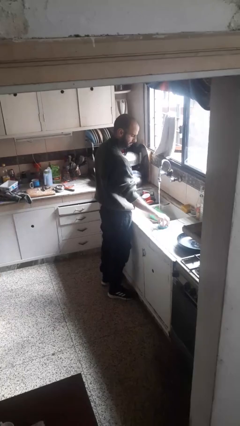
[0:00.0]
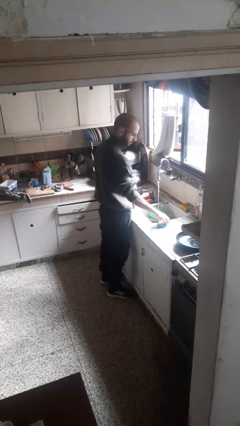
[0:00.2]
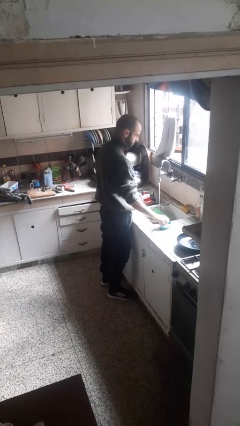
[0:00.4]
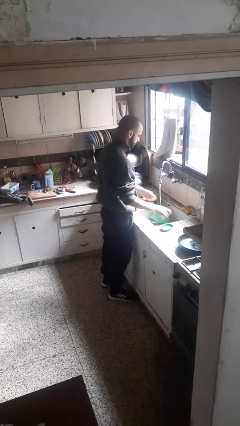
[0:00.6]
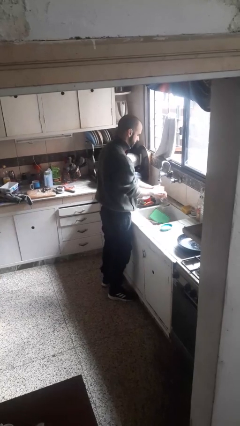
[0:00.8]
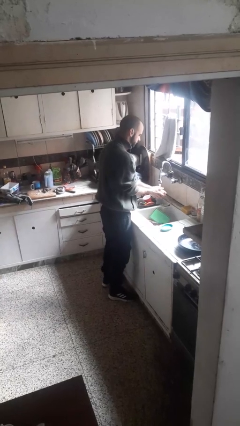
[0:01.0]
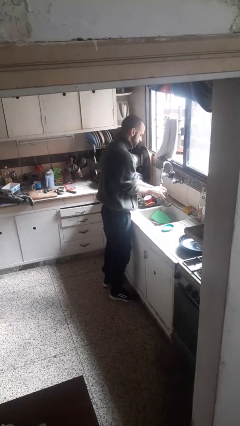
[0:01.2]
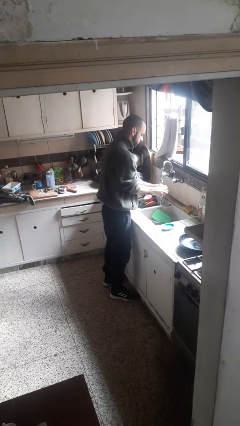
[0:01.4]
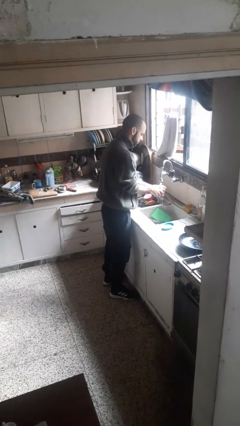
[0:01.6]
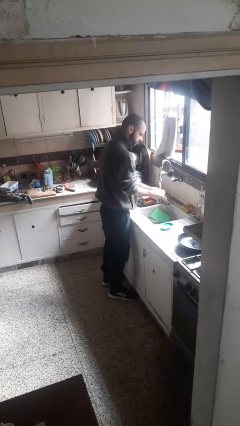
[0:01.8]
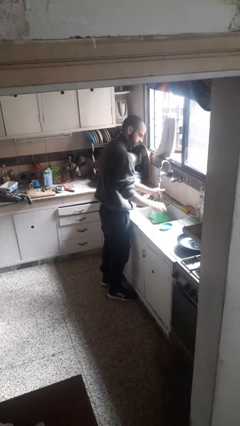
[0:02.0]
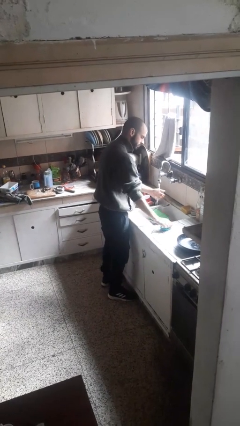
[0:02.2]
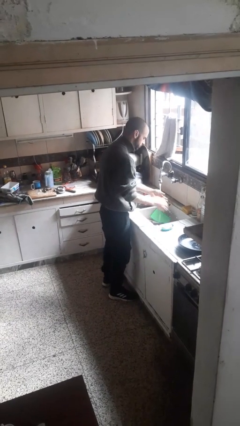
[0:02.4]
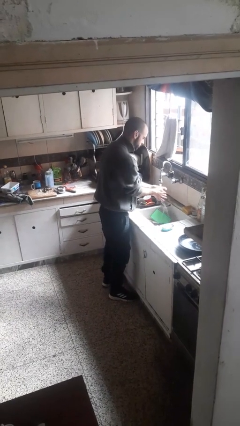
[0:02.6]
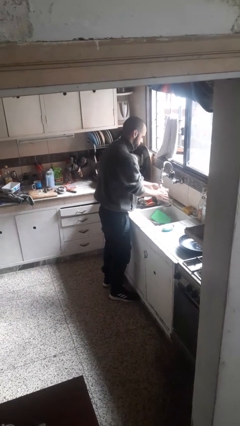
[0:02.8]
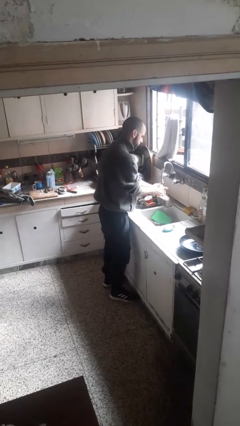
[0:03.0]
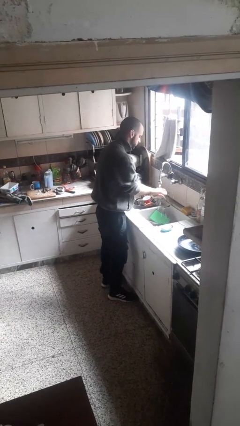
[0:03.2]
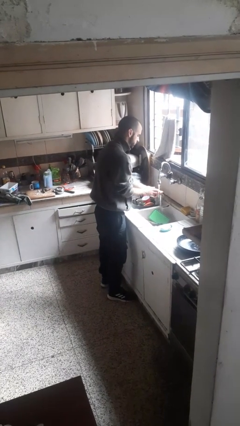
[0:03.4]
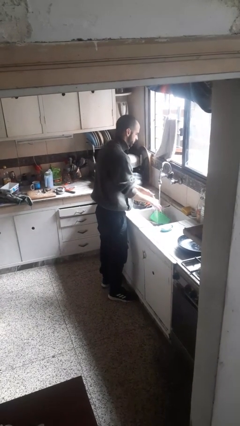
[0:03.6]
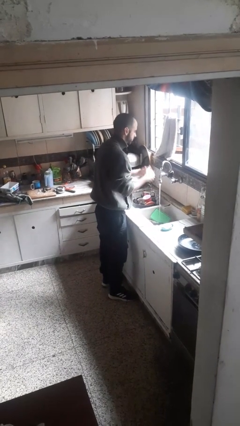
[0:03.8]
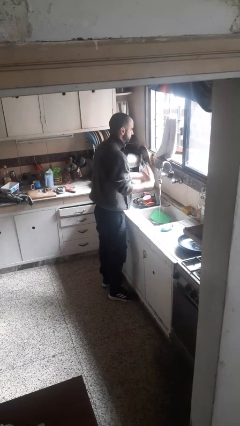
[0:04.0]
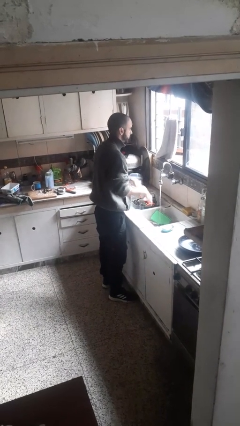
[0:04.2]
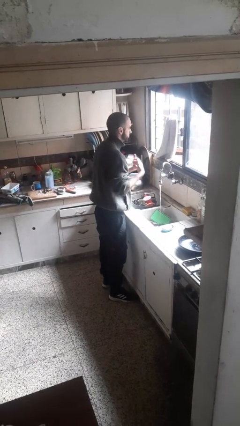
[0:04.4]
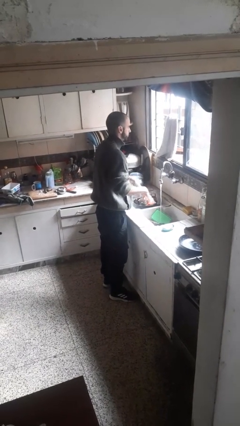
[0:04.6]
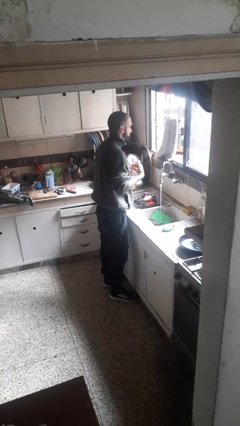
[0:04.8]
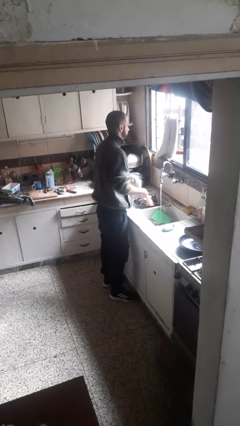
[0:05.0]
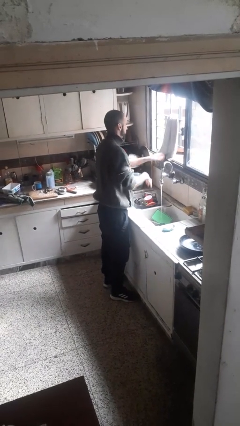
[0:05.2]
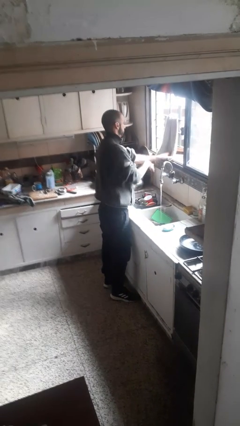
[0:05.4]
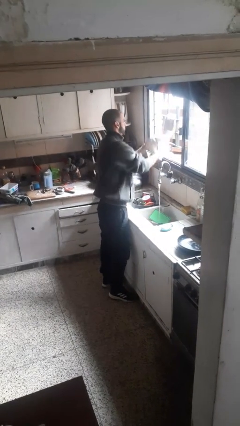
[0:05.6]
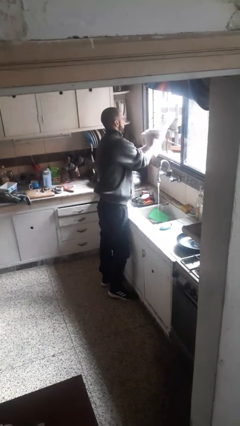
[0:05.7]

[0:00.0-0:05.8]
person washes hands

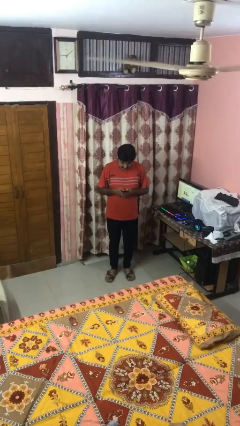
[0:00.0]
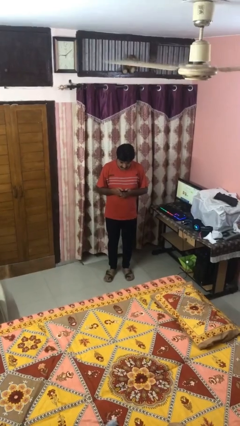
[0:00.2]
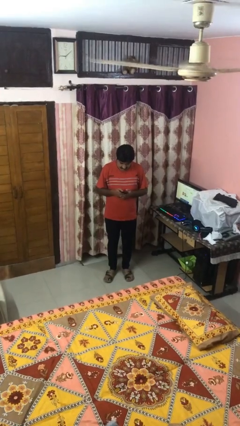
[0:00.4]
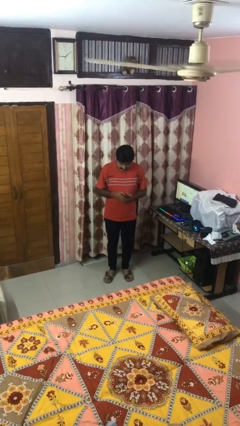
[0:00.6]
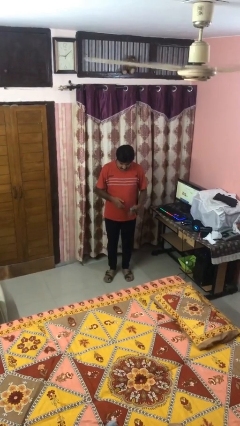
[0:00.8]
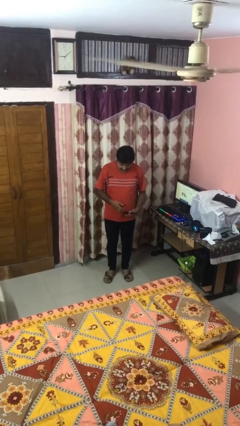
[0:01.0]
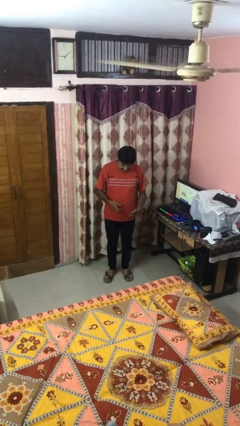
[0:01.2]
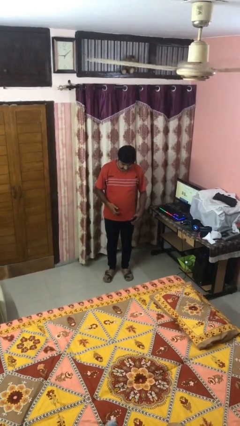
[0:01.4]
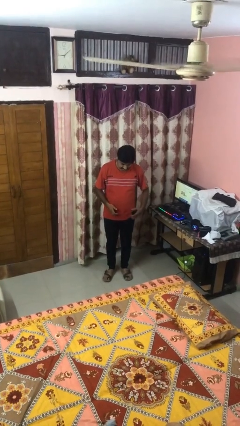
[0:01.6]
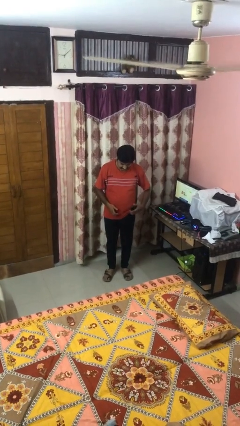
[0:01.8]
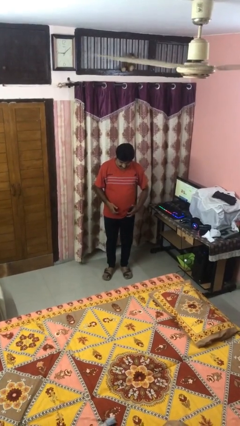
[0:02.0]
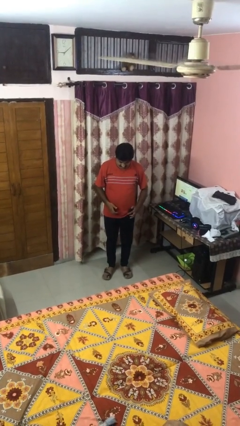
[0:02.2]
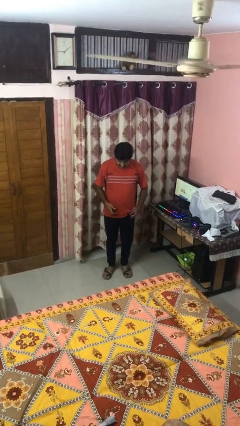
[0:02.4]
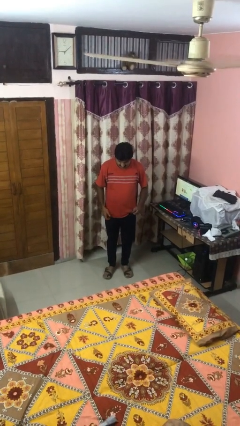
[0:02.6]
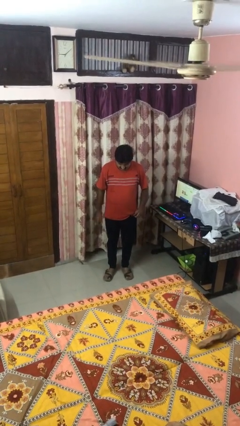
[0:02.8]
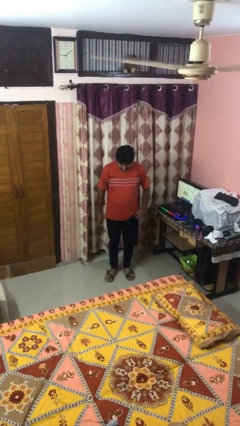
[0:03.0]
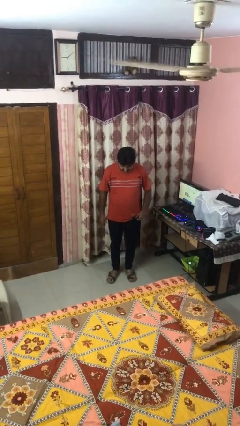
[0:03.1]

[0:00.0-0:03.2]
person puts phone into pocket

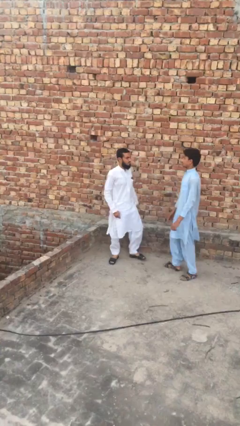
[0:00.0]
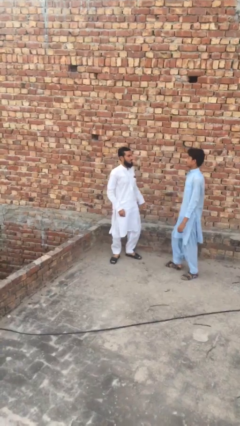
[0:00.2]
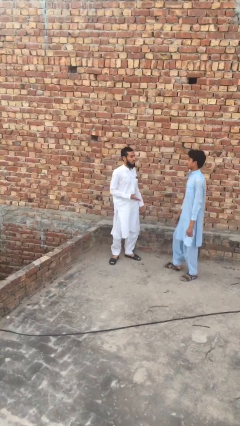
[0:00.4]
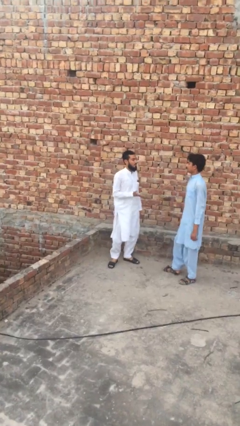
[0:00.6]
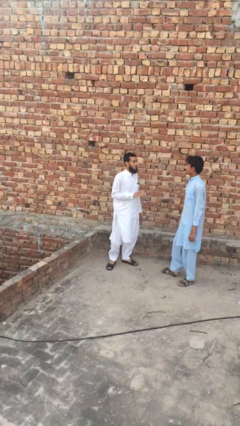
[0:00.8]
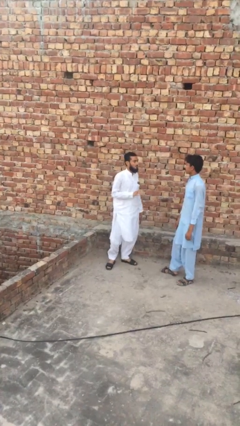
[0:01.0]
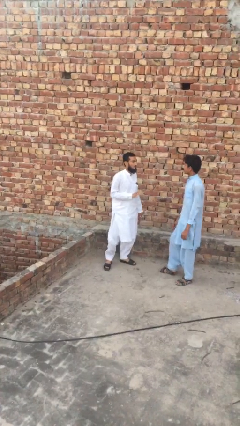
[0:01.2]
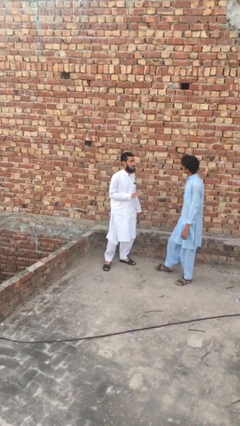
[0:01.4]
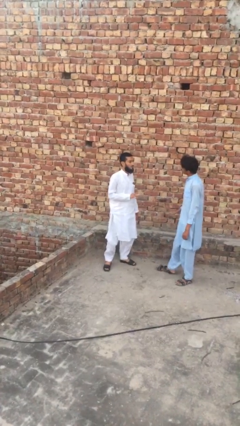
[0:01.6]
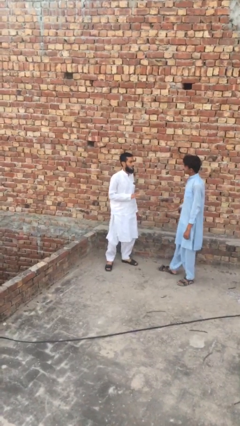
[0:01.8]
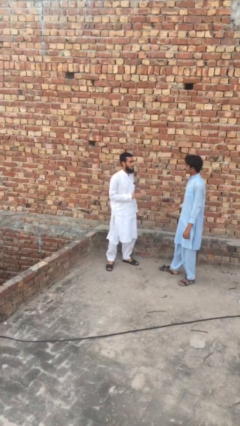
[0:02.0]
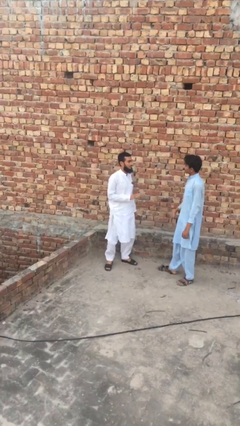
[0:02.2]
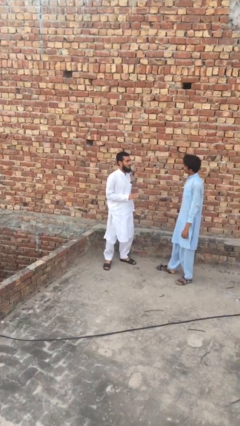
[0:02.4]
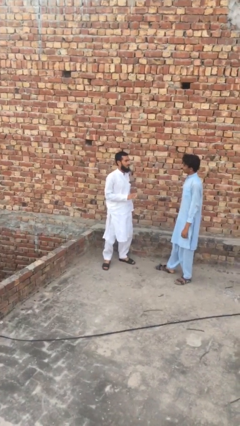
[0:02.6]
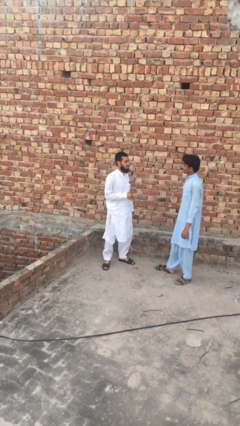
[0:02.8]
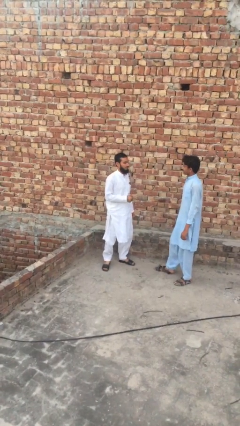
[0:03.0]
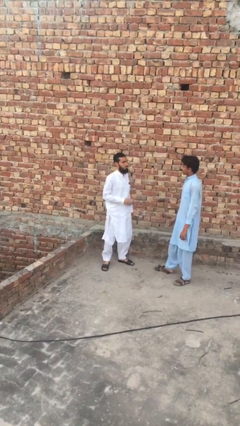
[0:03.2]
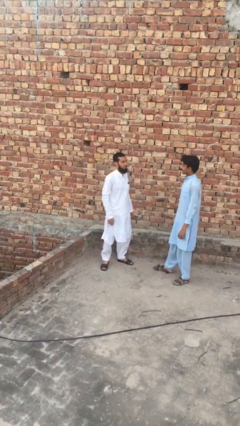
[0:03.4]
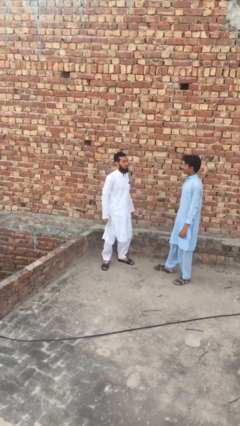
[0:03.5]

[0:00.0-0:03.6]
person talks to person

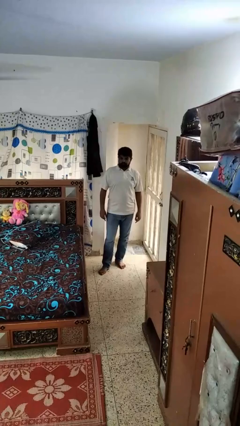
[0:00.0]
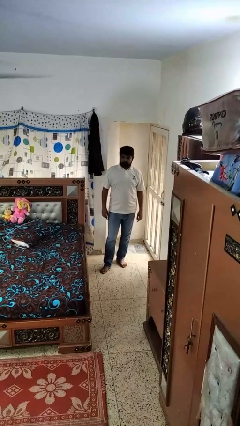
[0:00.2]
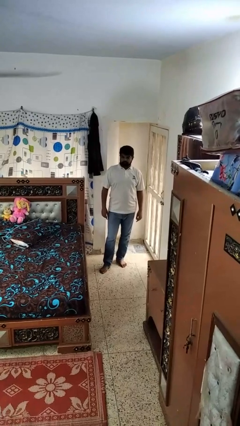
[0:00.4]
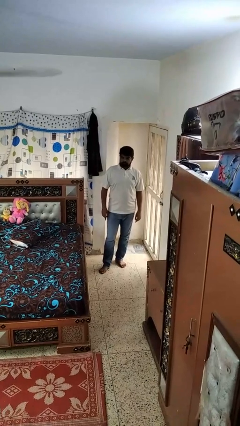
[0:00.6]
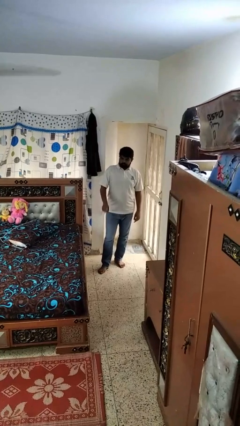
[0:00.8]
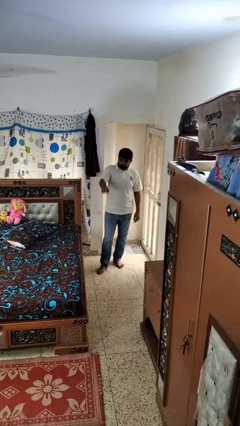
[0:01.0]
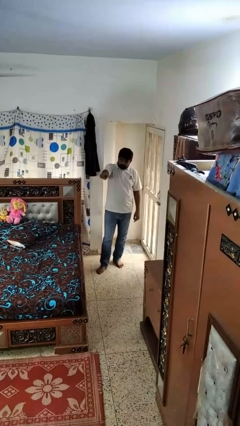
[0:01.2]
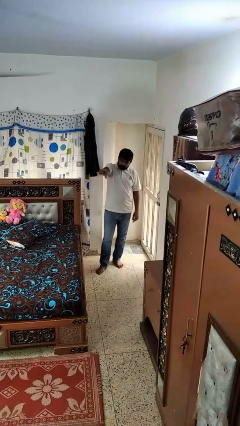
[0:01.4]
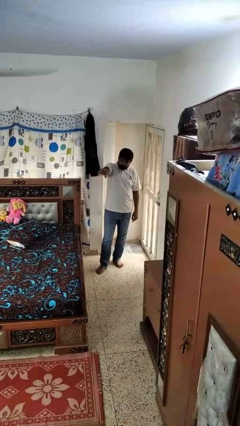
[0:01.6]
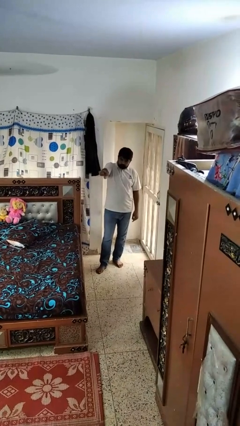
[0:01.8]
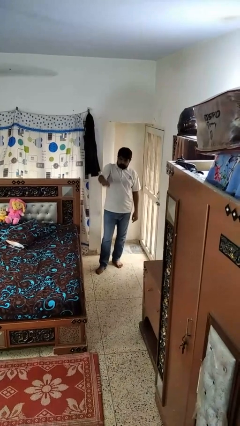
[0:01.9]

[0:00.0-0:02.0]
person points at person

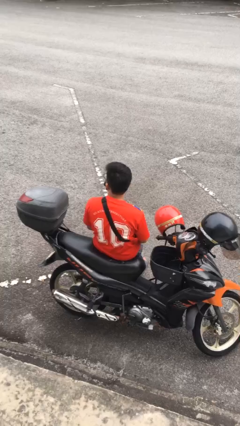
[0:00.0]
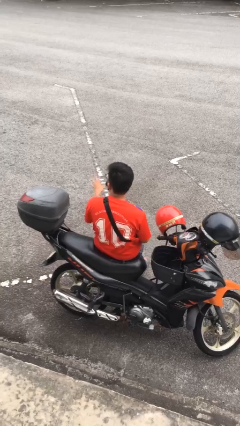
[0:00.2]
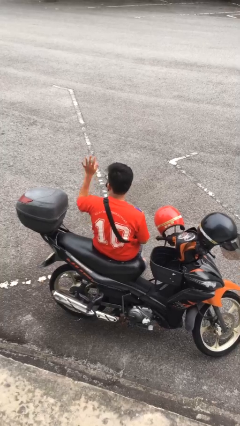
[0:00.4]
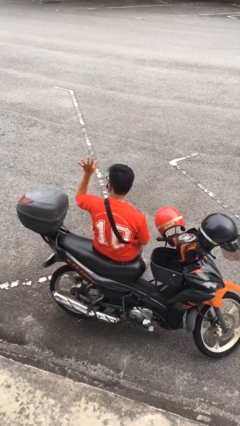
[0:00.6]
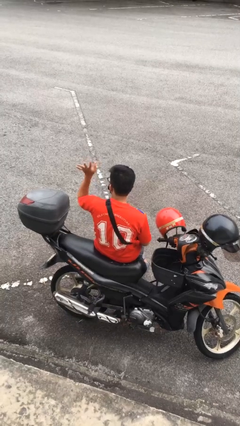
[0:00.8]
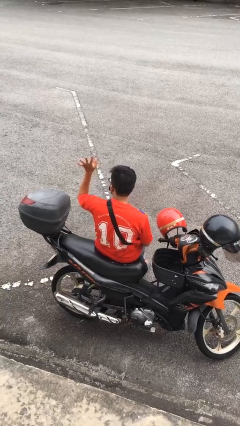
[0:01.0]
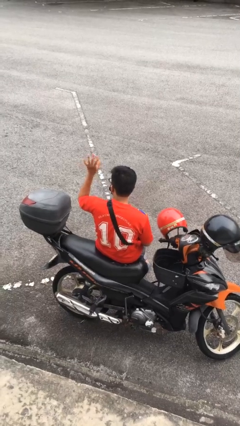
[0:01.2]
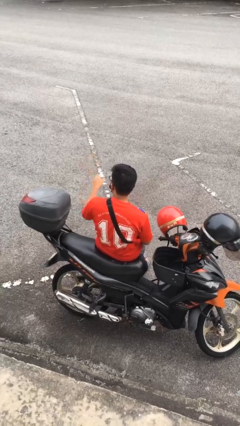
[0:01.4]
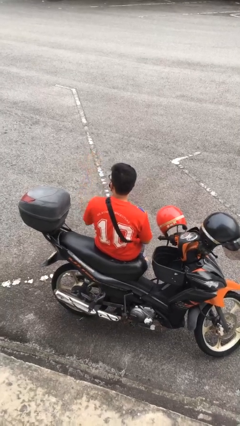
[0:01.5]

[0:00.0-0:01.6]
person waves at person

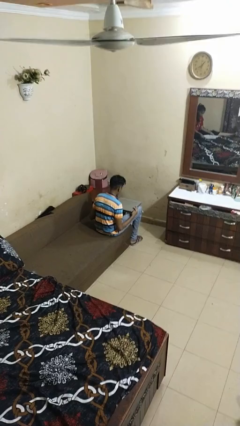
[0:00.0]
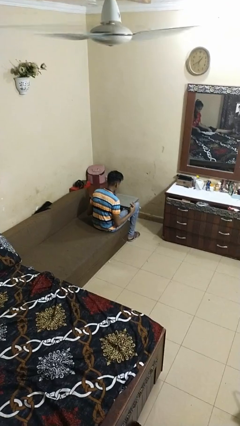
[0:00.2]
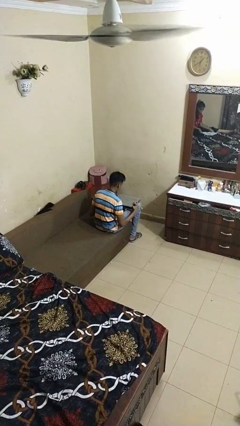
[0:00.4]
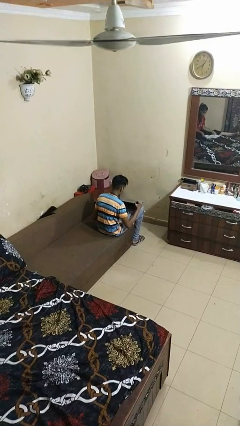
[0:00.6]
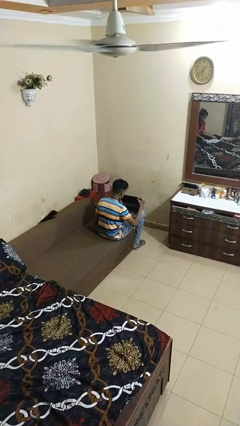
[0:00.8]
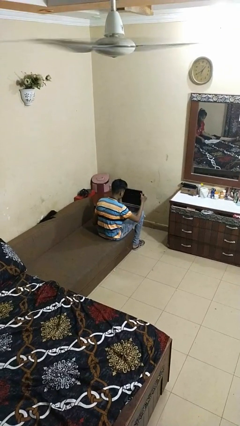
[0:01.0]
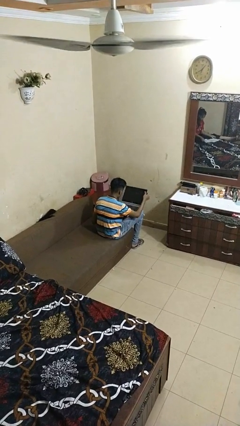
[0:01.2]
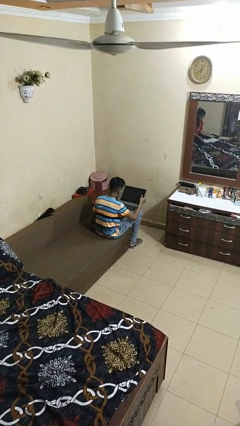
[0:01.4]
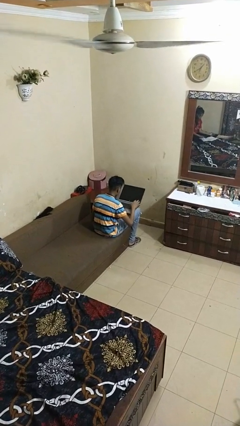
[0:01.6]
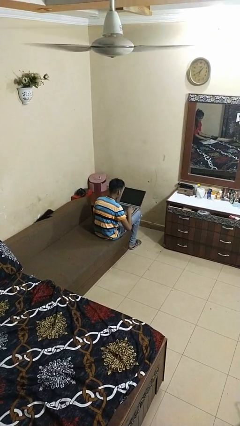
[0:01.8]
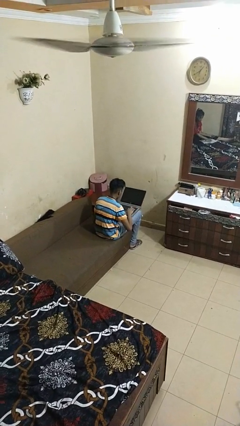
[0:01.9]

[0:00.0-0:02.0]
person opens laptop
